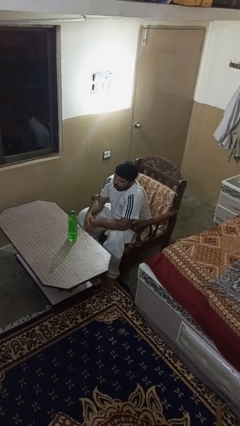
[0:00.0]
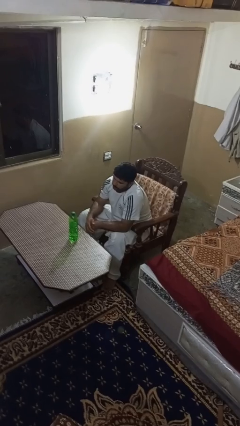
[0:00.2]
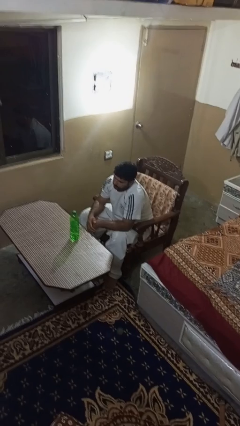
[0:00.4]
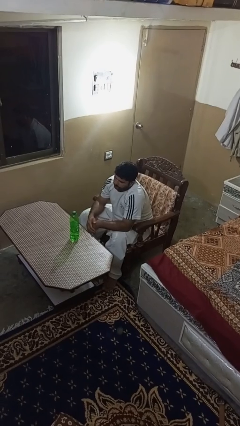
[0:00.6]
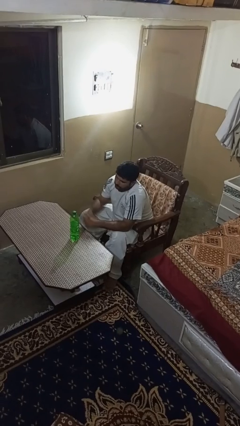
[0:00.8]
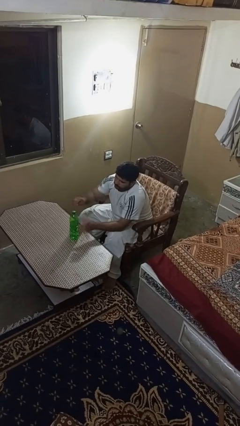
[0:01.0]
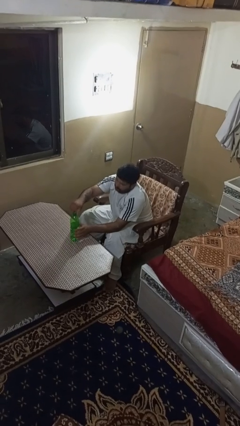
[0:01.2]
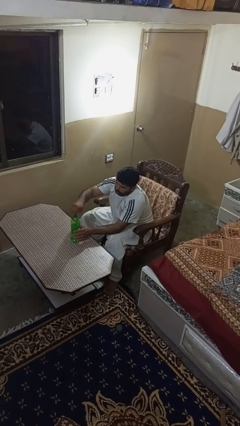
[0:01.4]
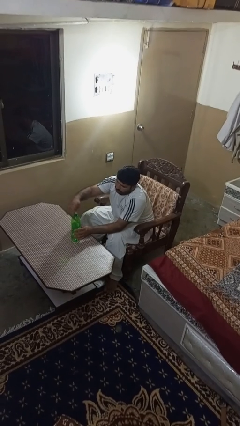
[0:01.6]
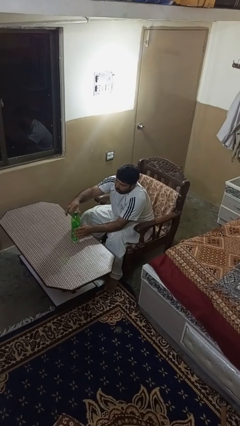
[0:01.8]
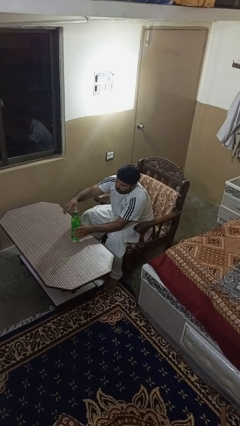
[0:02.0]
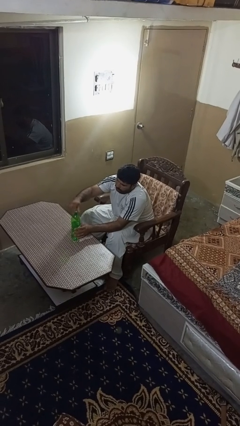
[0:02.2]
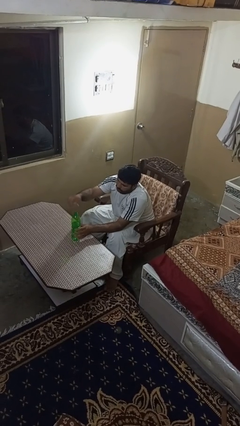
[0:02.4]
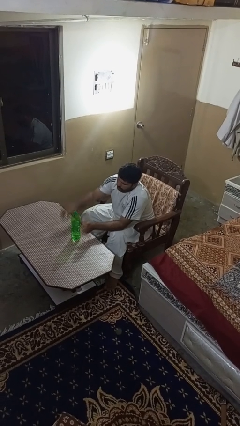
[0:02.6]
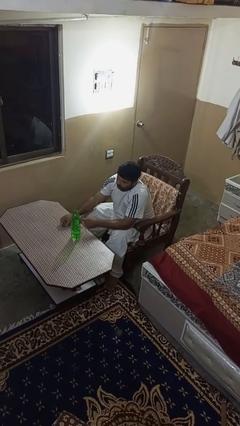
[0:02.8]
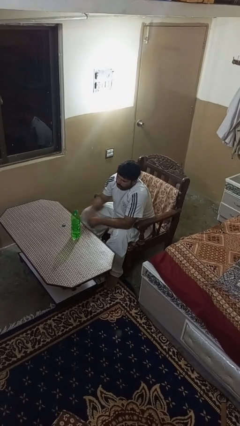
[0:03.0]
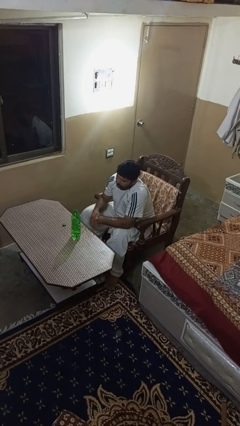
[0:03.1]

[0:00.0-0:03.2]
person unscrews lid from bottle

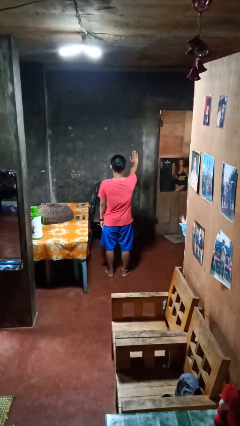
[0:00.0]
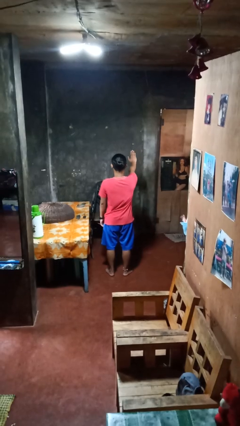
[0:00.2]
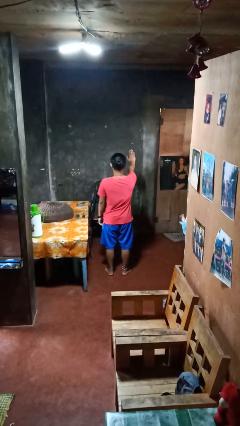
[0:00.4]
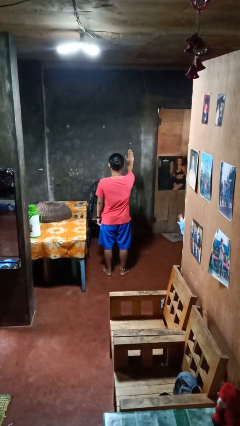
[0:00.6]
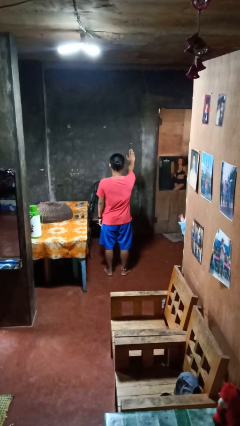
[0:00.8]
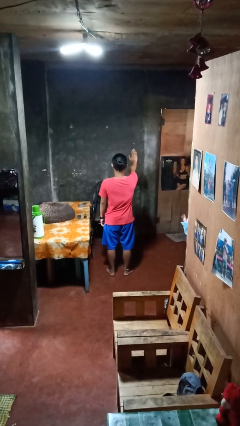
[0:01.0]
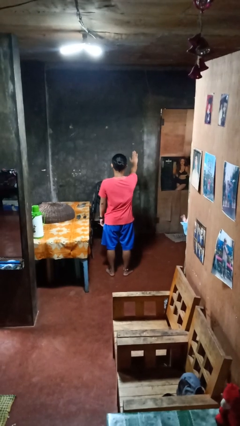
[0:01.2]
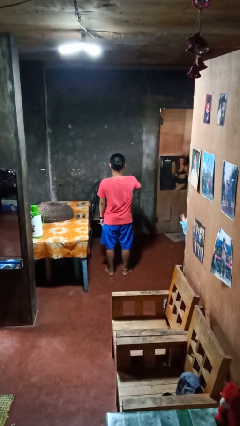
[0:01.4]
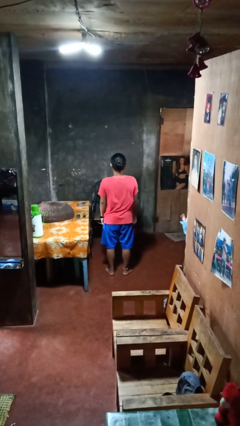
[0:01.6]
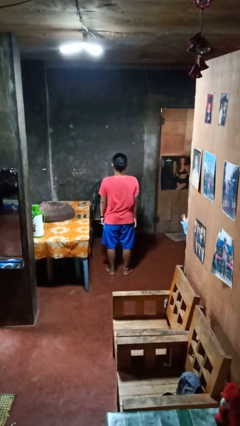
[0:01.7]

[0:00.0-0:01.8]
person gestures stop

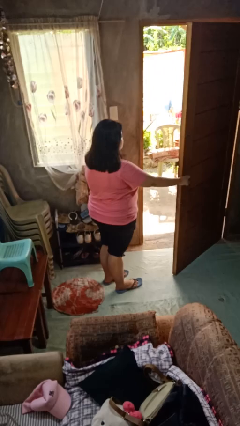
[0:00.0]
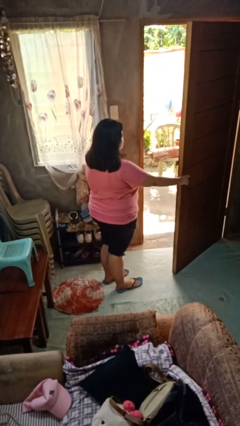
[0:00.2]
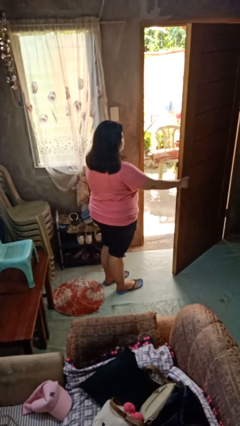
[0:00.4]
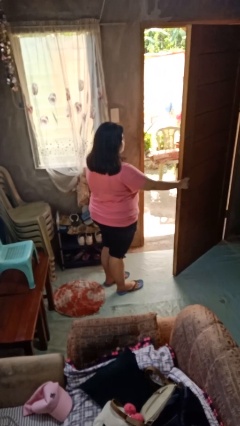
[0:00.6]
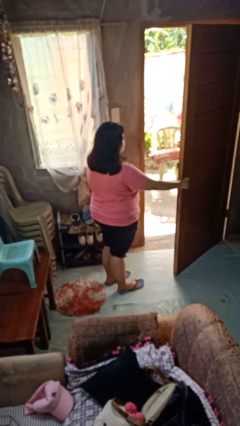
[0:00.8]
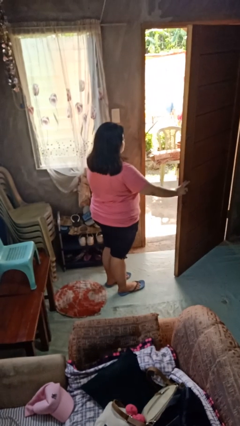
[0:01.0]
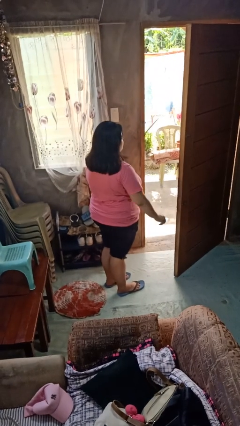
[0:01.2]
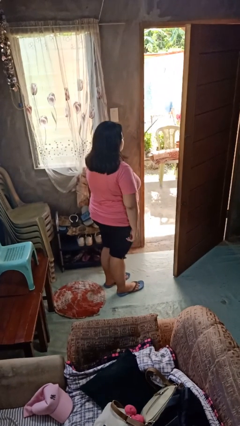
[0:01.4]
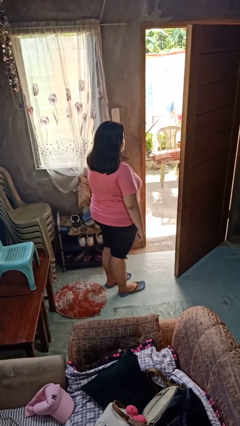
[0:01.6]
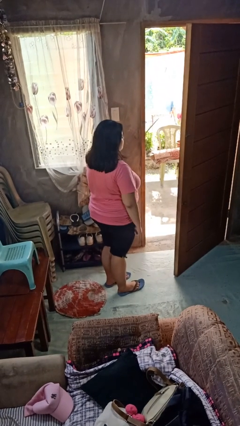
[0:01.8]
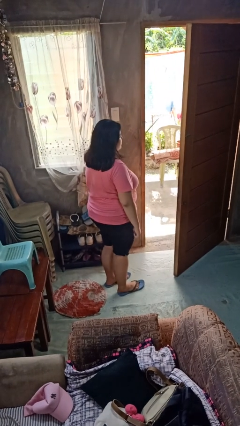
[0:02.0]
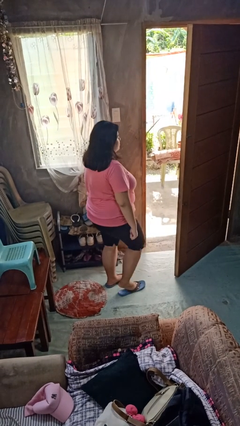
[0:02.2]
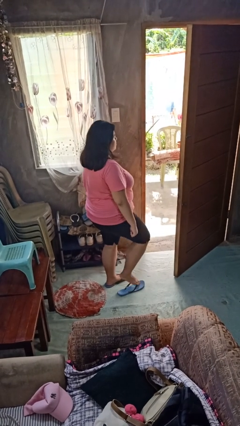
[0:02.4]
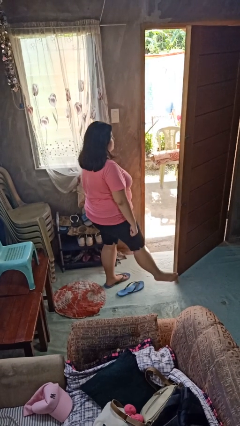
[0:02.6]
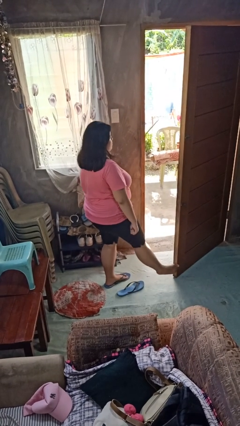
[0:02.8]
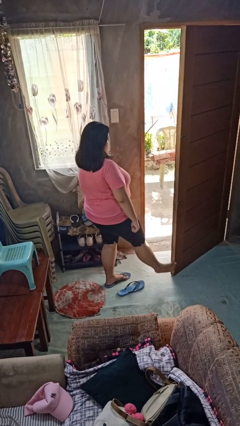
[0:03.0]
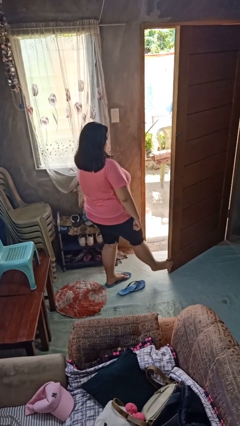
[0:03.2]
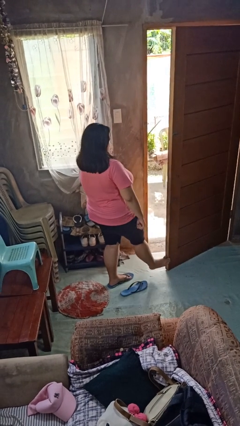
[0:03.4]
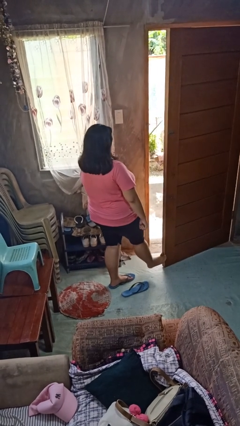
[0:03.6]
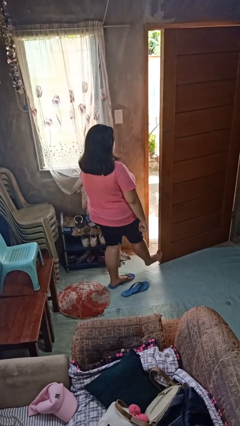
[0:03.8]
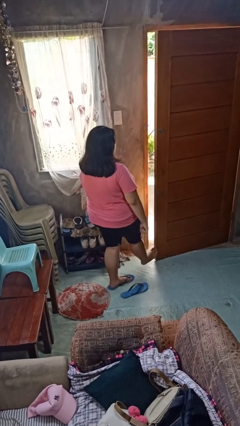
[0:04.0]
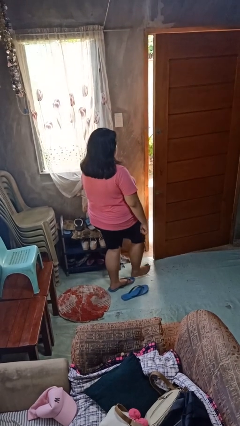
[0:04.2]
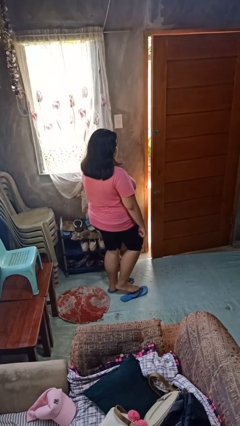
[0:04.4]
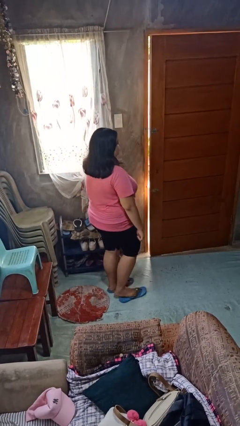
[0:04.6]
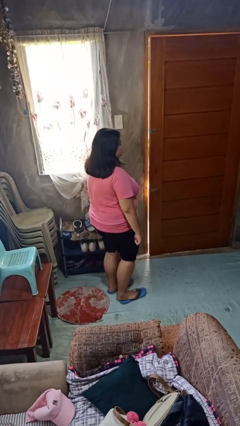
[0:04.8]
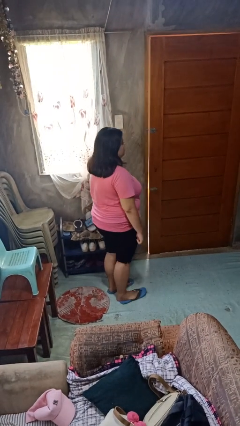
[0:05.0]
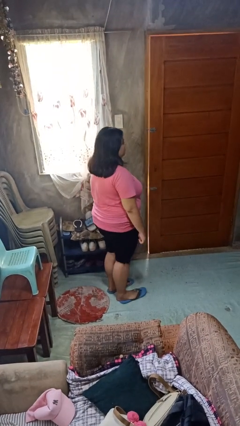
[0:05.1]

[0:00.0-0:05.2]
person closes door with foot

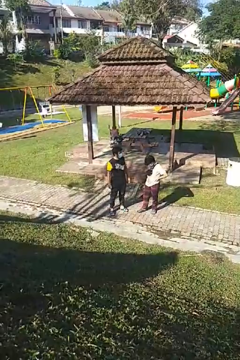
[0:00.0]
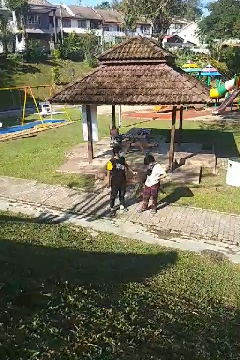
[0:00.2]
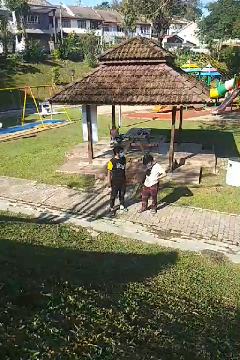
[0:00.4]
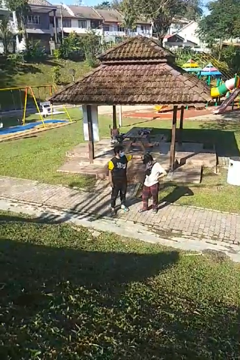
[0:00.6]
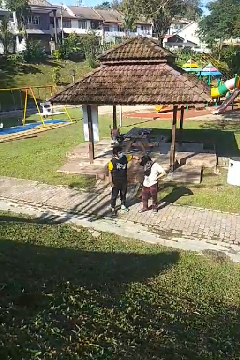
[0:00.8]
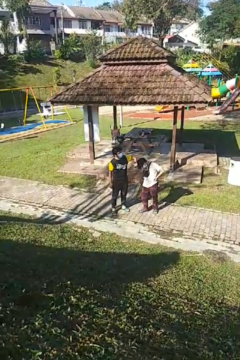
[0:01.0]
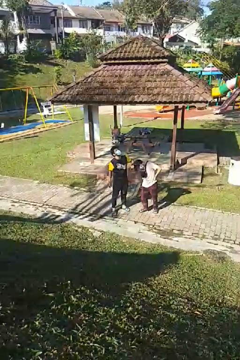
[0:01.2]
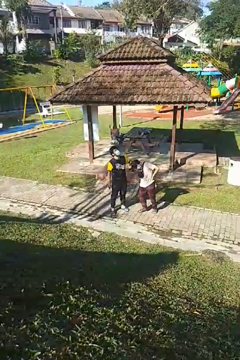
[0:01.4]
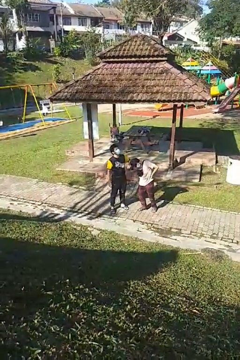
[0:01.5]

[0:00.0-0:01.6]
person grabs person by hair

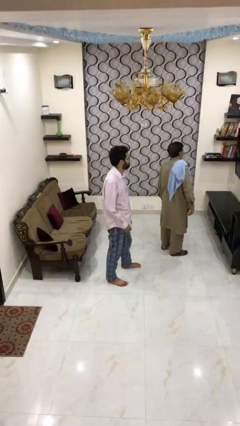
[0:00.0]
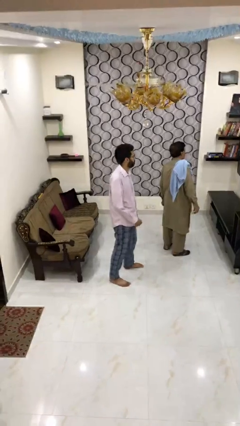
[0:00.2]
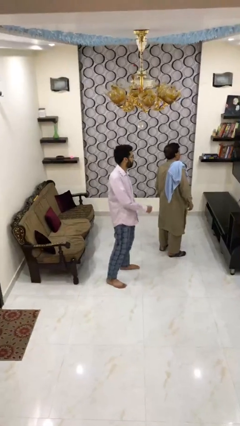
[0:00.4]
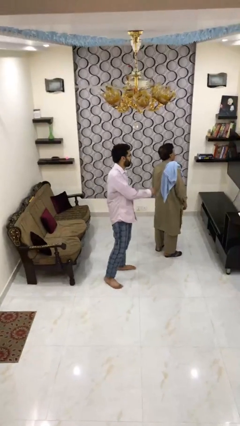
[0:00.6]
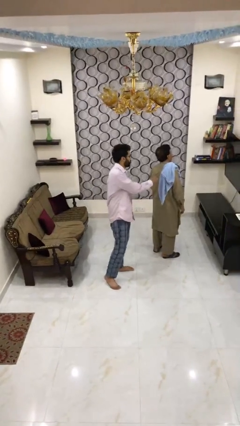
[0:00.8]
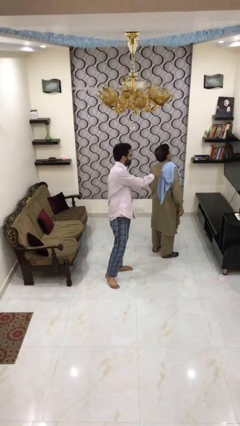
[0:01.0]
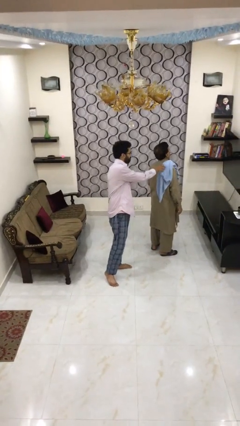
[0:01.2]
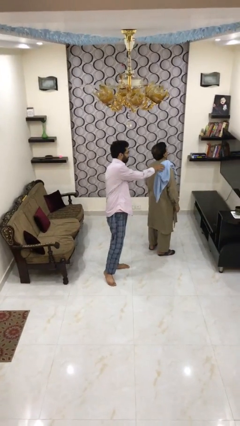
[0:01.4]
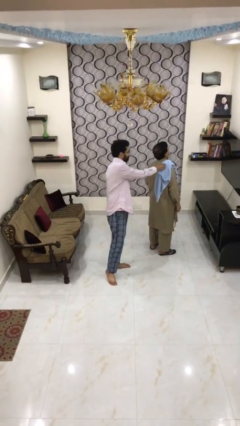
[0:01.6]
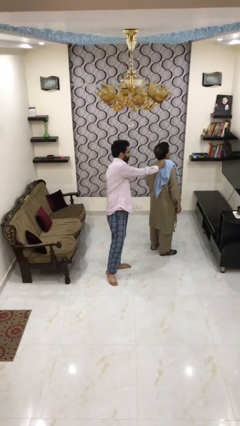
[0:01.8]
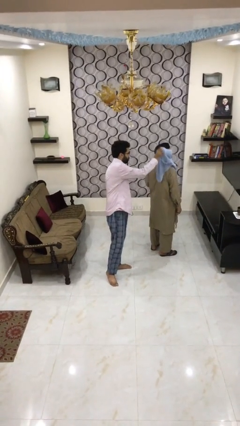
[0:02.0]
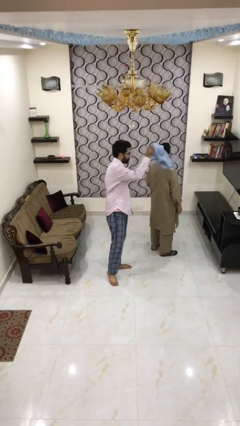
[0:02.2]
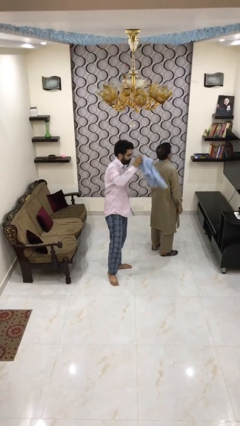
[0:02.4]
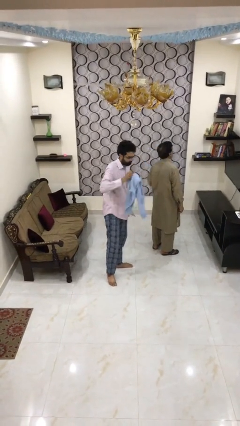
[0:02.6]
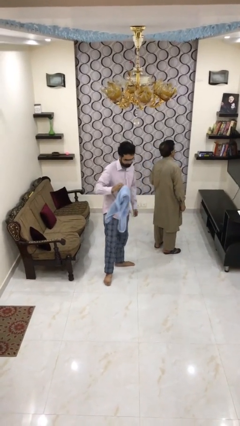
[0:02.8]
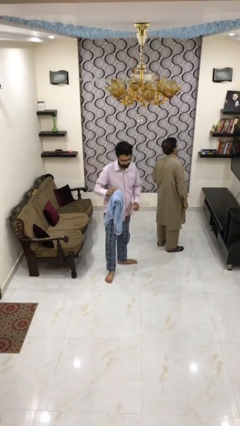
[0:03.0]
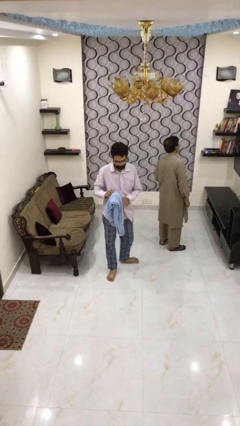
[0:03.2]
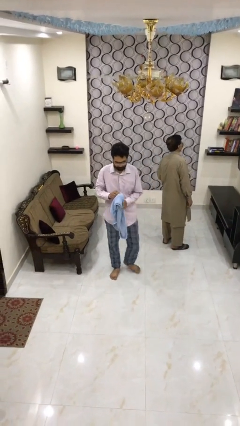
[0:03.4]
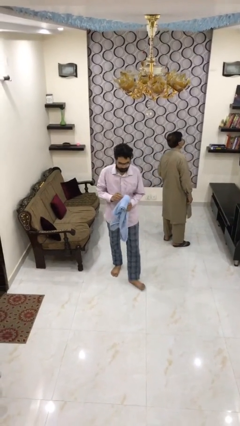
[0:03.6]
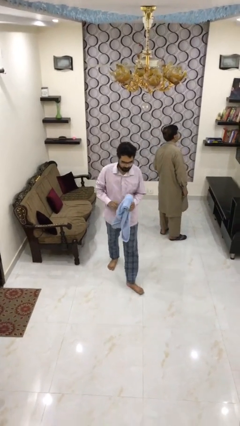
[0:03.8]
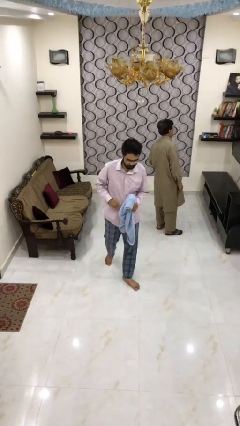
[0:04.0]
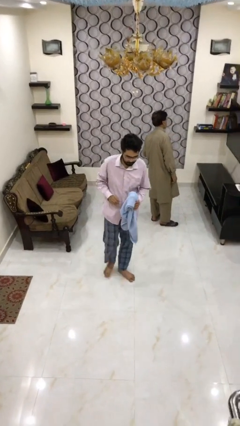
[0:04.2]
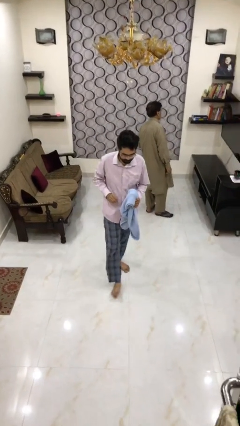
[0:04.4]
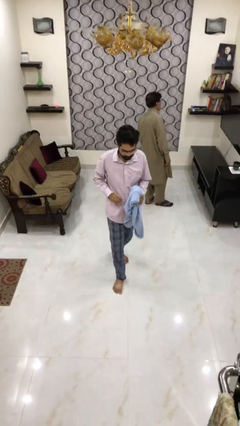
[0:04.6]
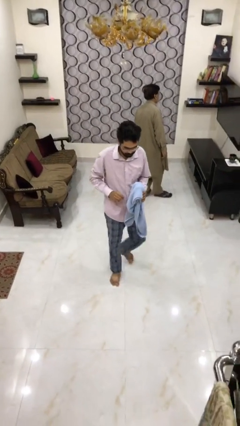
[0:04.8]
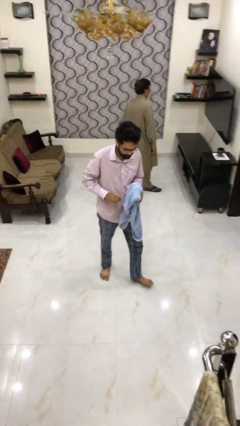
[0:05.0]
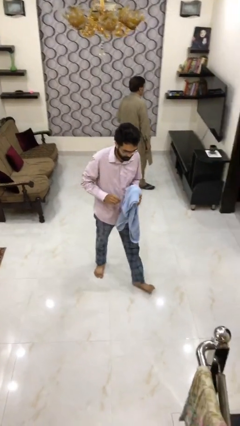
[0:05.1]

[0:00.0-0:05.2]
person steals object from person

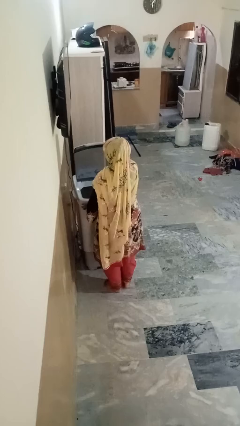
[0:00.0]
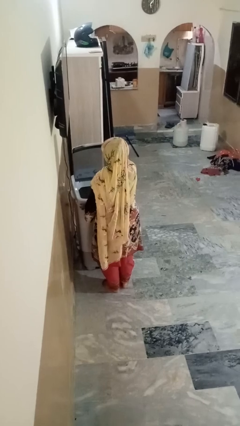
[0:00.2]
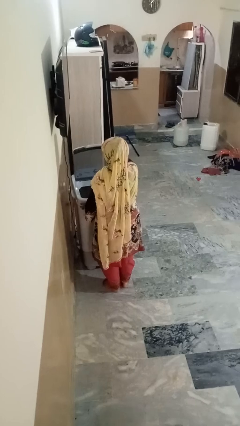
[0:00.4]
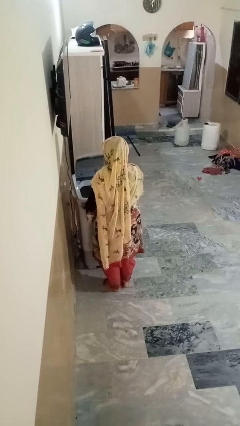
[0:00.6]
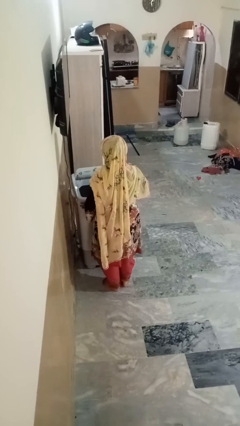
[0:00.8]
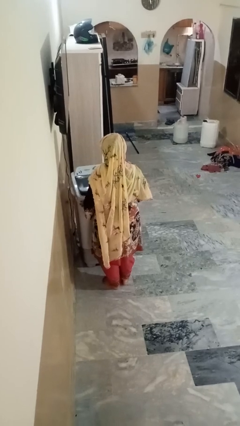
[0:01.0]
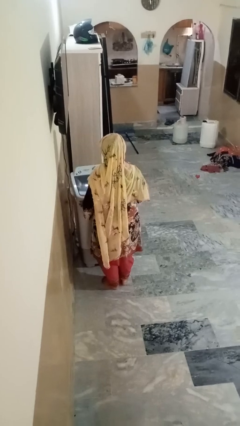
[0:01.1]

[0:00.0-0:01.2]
person closes clothes washer
